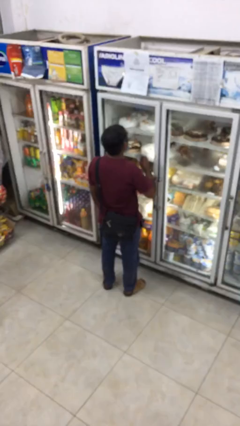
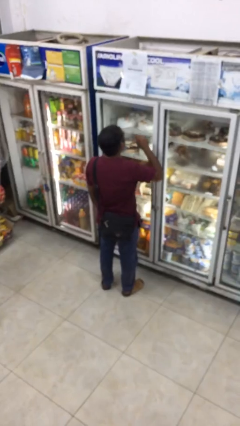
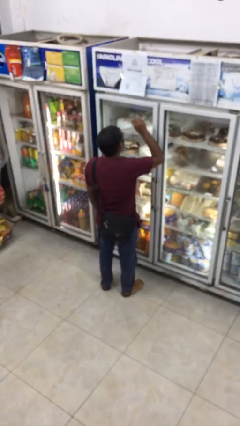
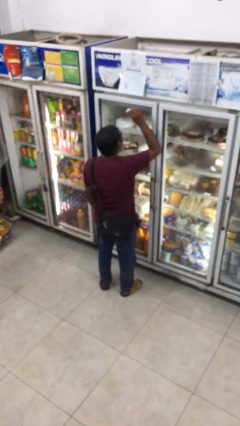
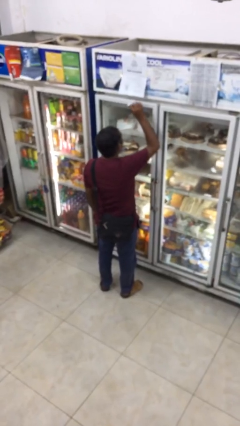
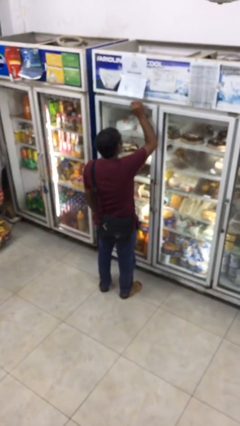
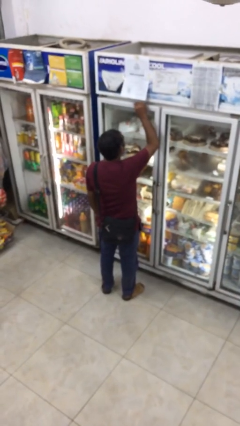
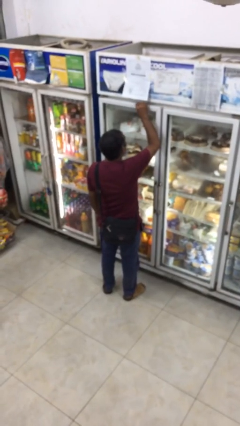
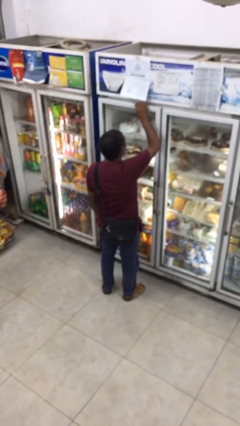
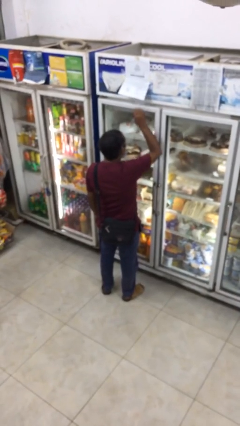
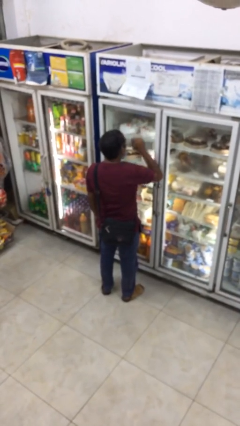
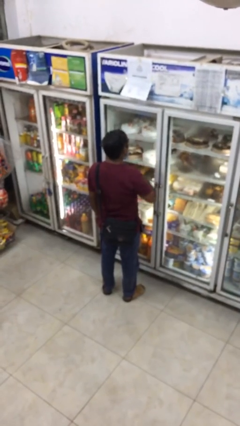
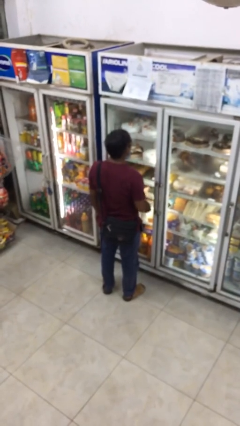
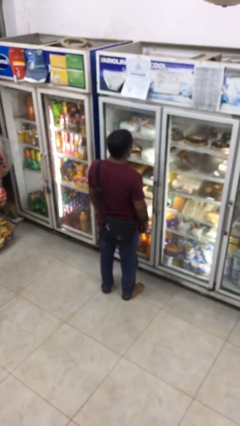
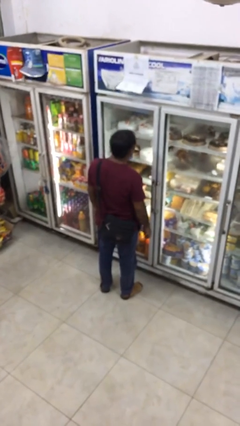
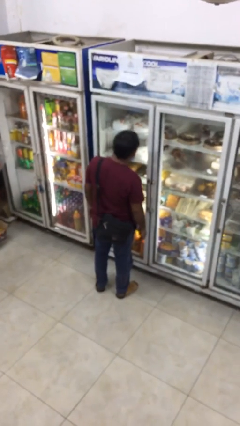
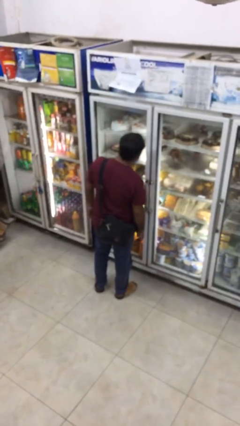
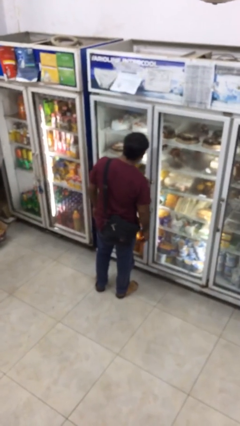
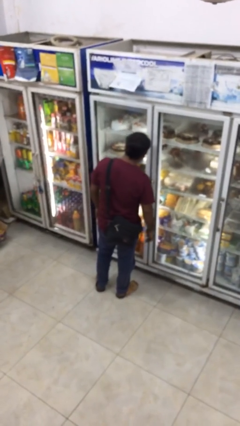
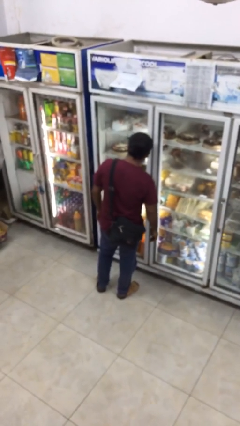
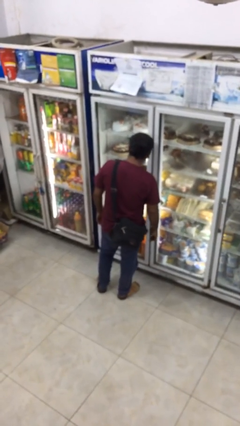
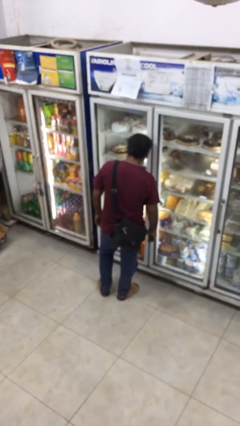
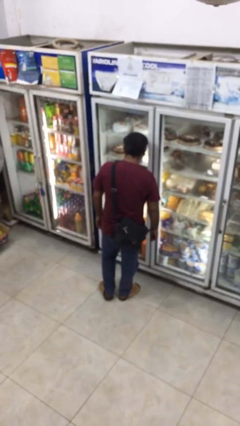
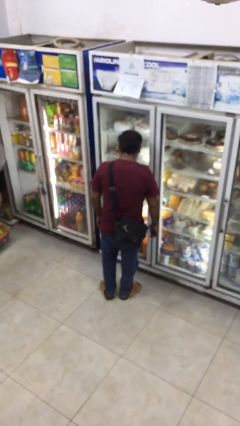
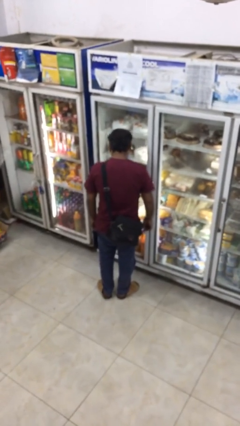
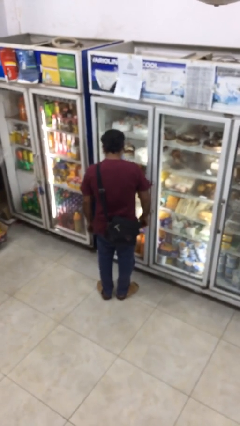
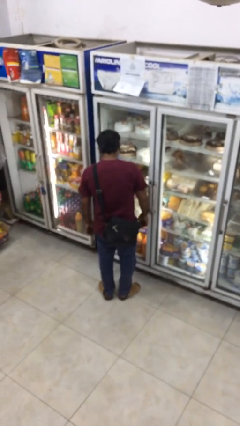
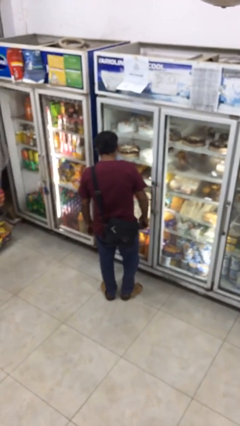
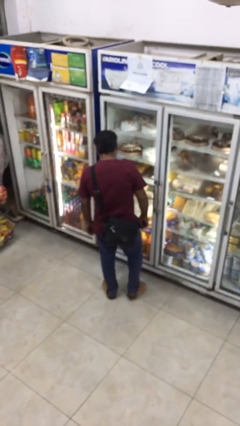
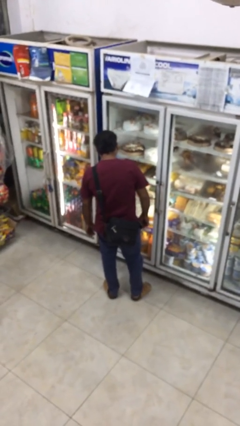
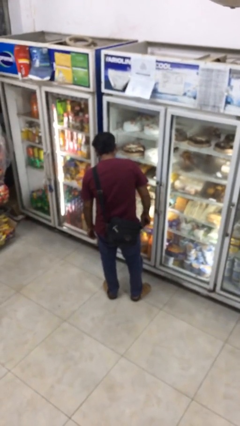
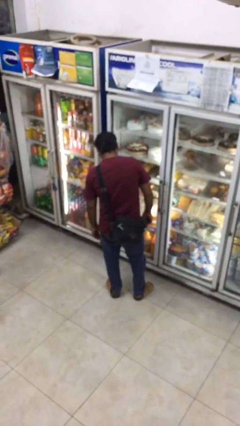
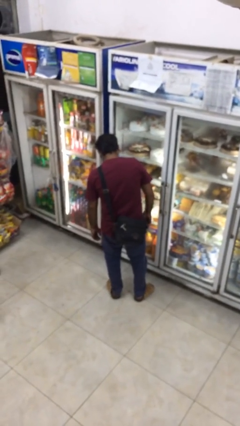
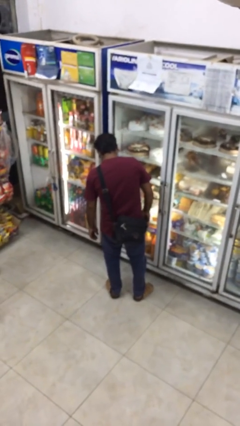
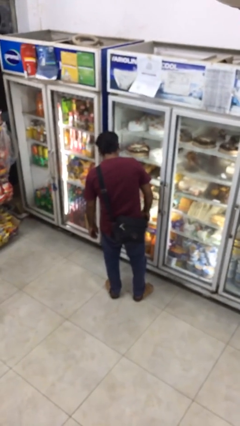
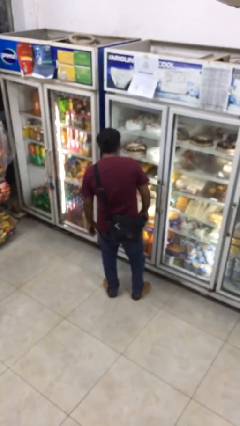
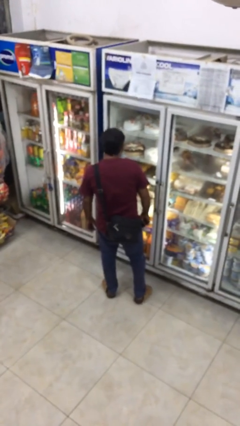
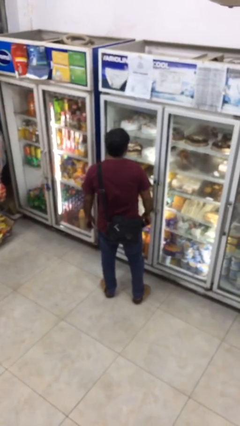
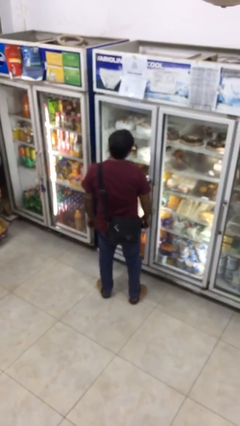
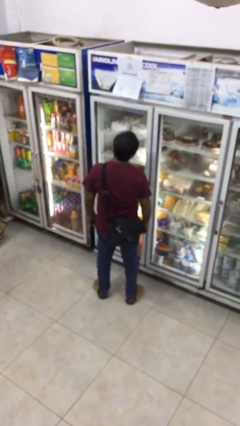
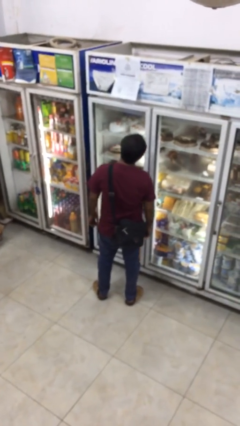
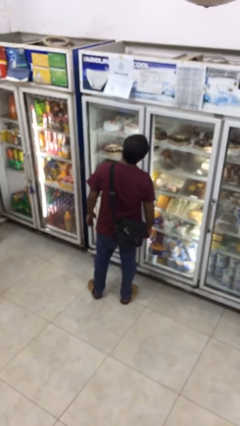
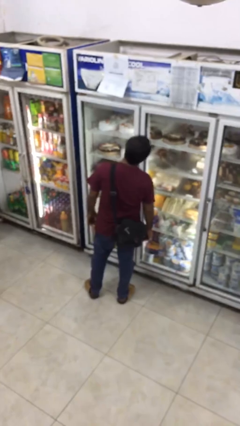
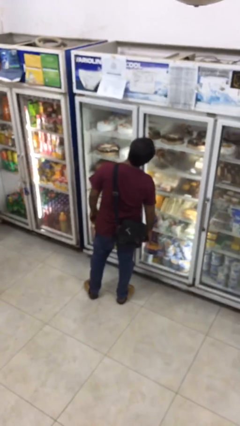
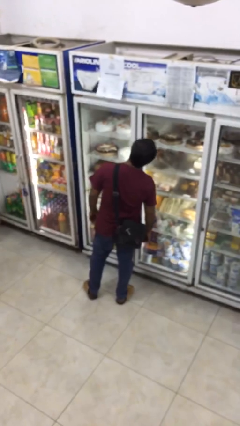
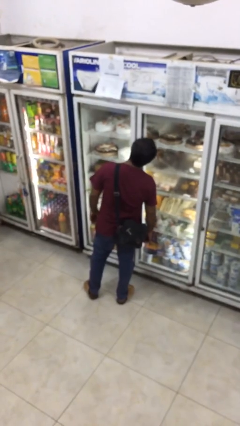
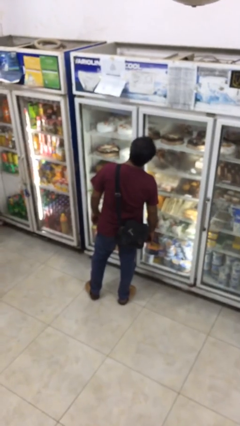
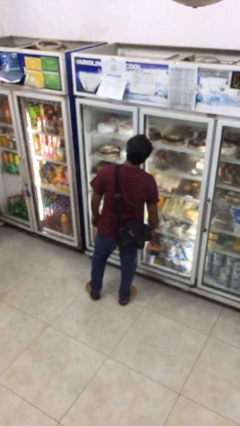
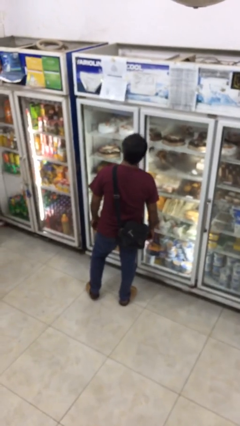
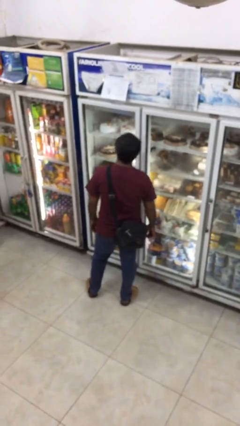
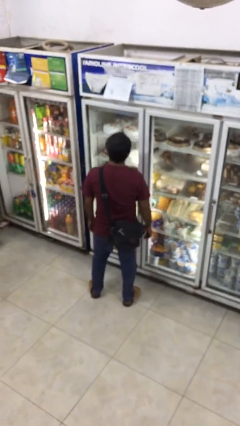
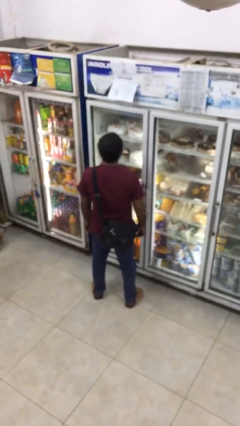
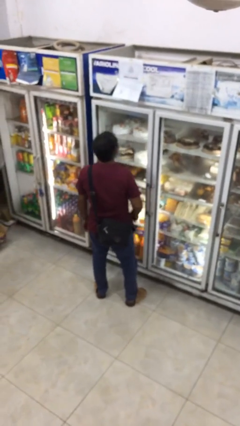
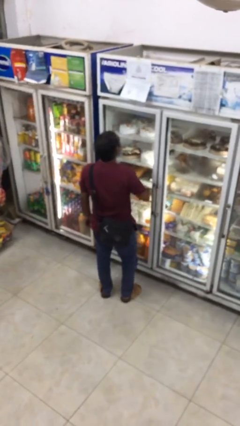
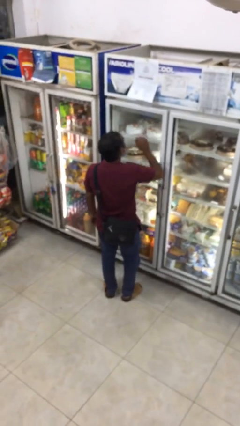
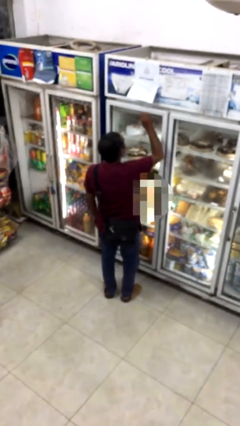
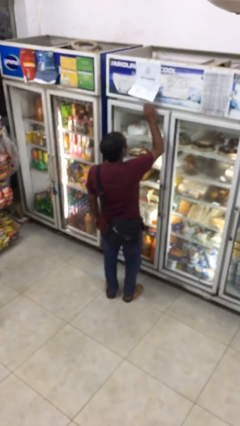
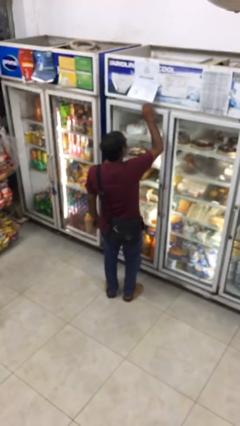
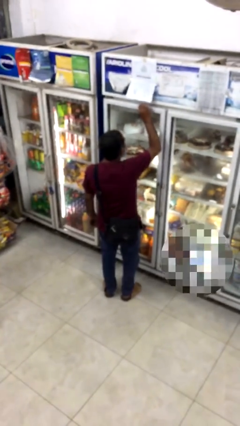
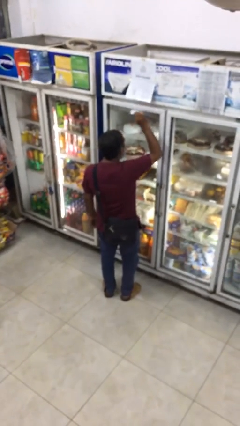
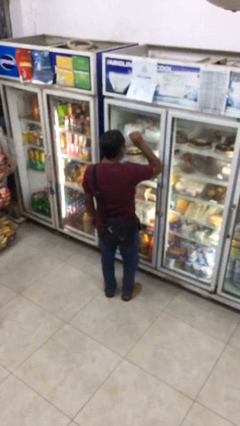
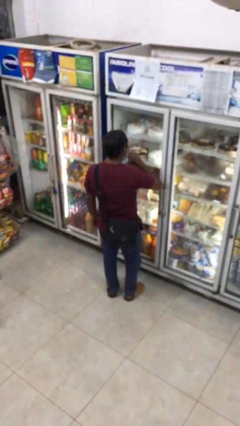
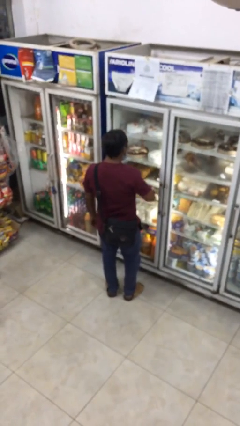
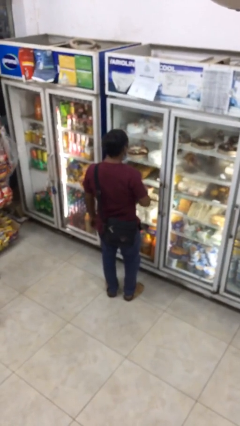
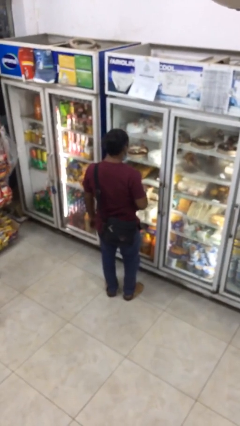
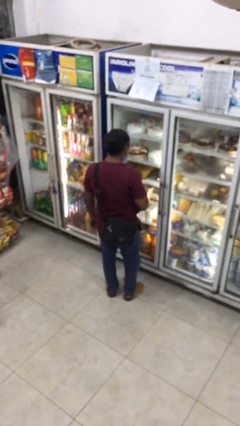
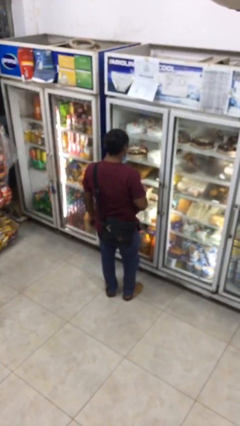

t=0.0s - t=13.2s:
person purchases from machine

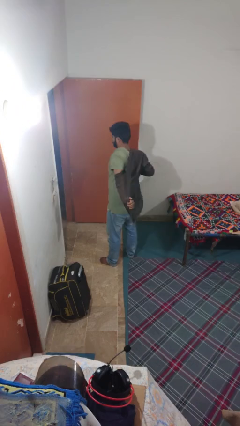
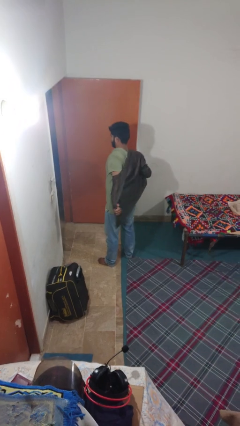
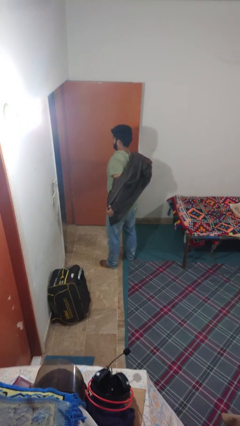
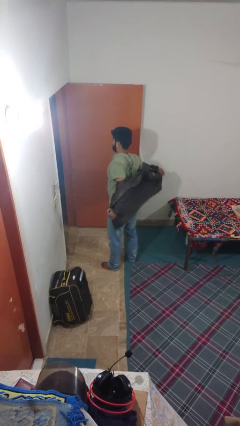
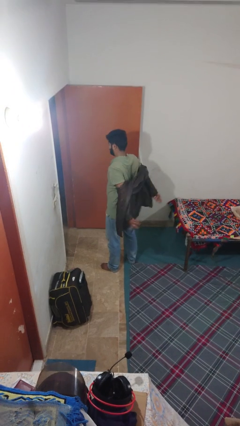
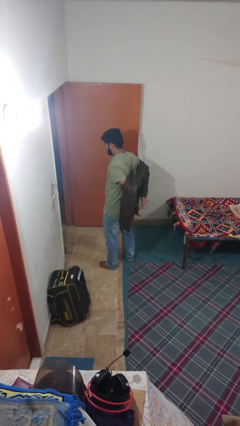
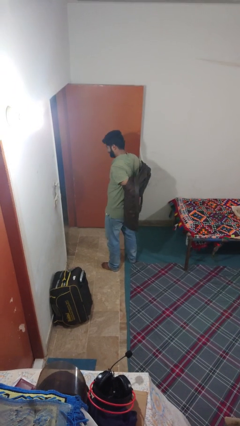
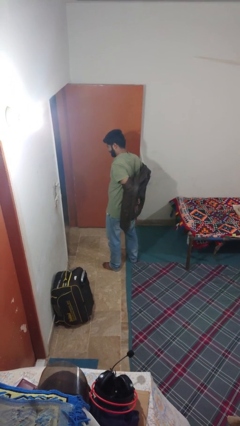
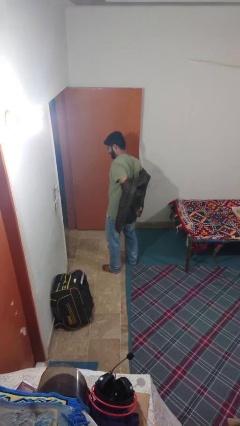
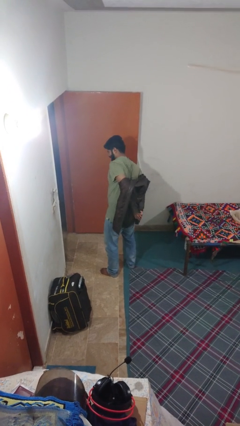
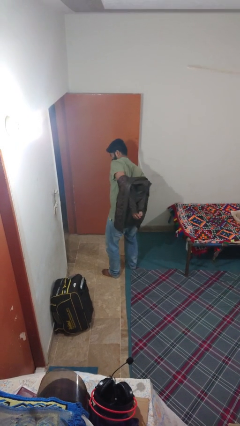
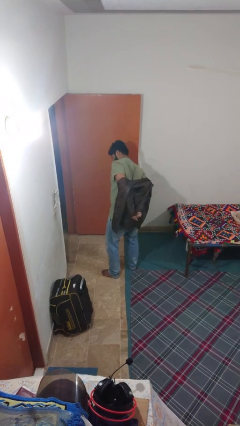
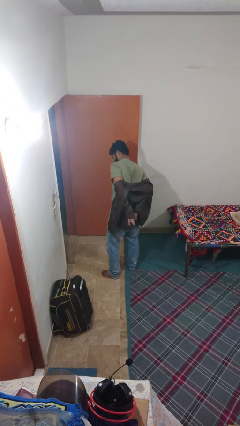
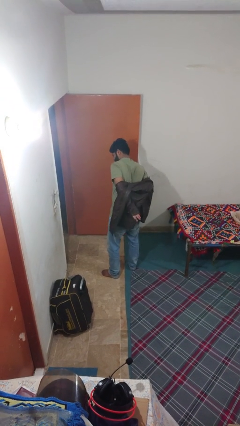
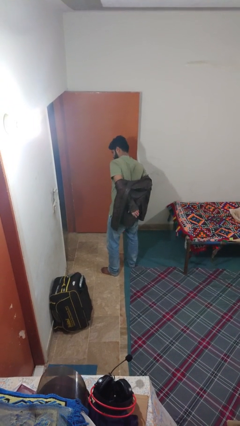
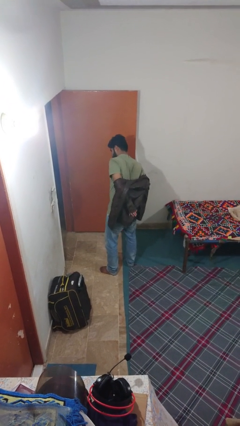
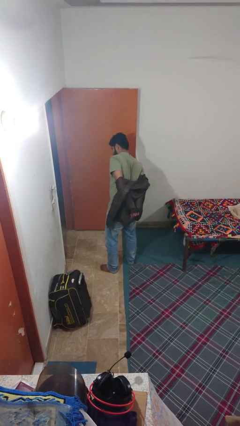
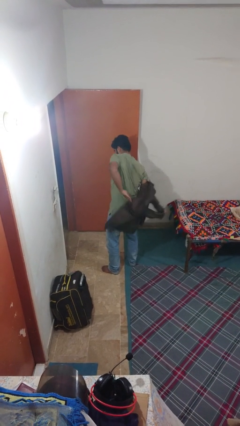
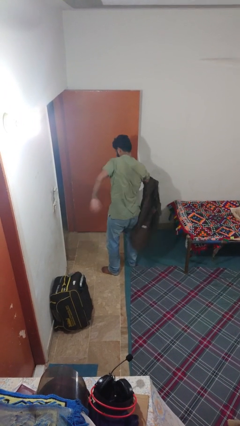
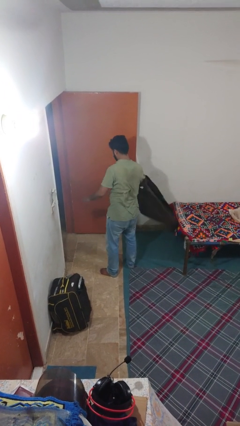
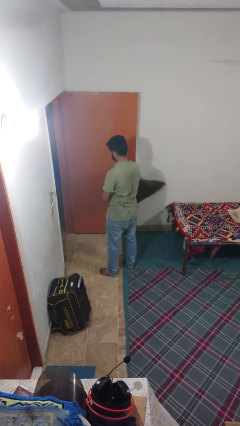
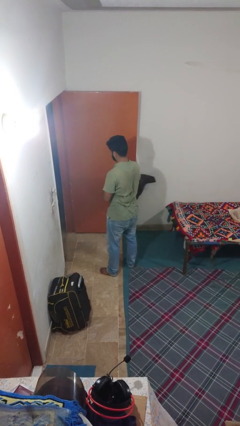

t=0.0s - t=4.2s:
person takes off jacket

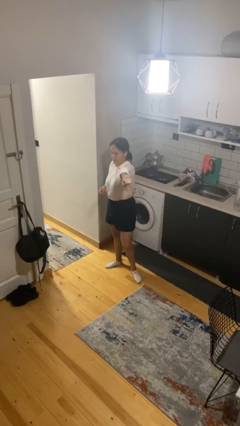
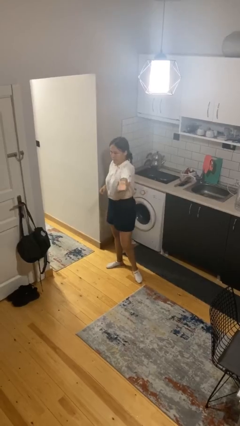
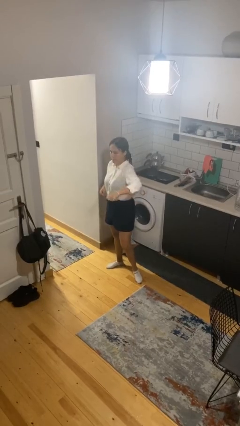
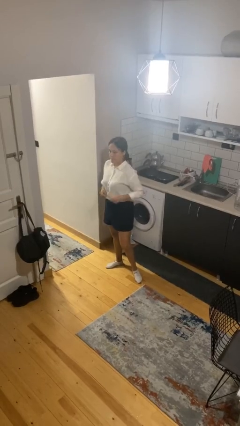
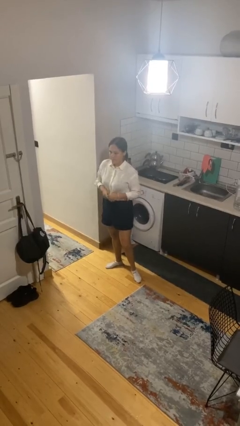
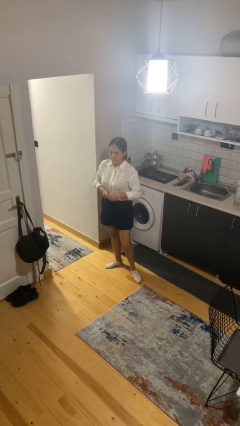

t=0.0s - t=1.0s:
person karate chop
